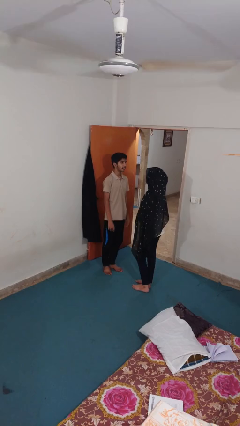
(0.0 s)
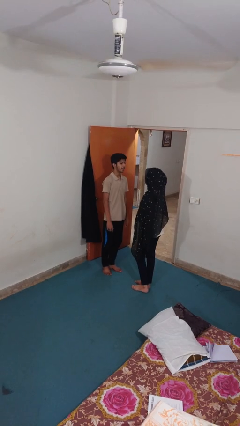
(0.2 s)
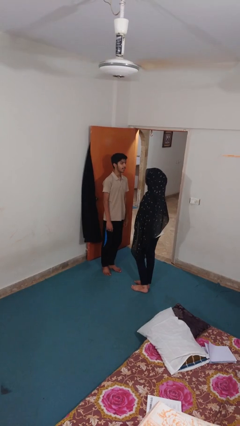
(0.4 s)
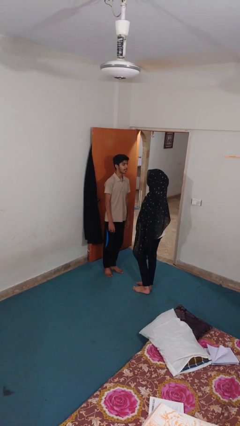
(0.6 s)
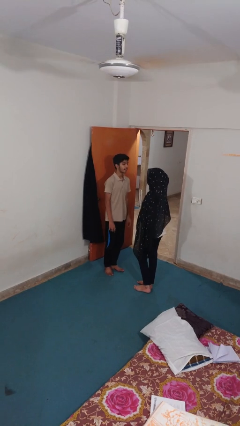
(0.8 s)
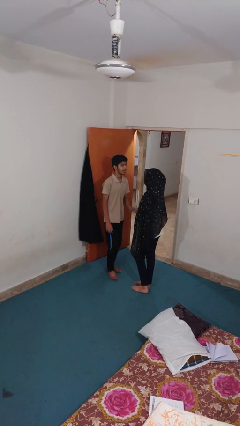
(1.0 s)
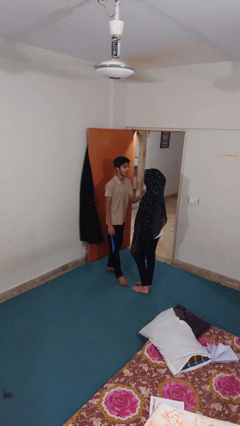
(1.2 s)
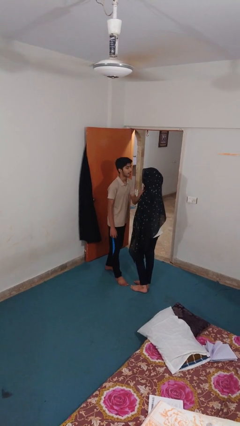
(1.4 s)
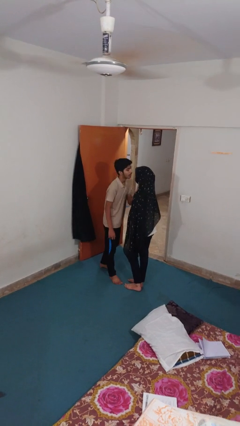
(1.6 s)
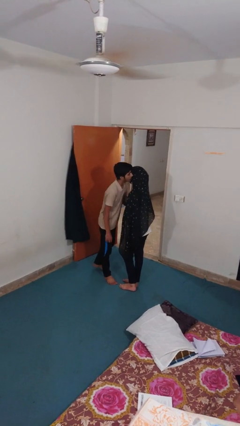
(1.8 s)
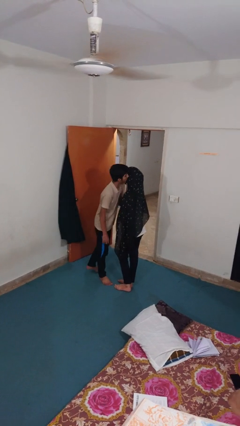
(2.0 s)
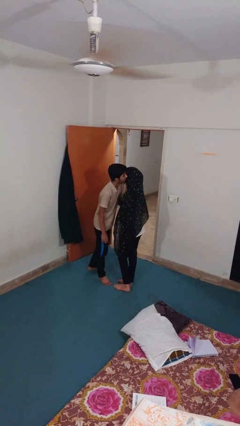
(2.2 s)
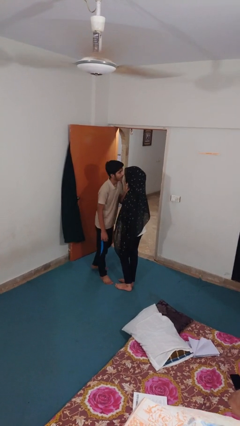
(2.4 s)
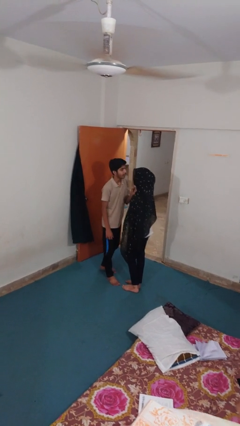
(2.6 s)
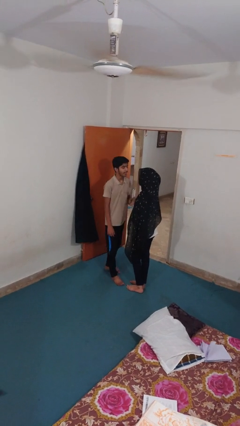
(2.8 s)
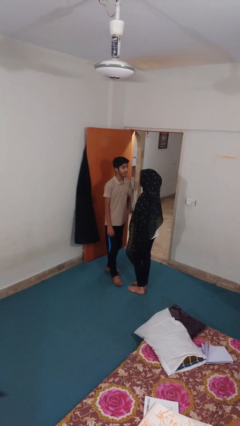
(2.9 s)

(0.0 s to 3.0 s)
person kisses cheek of person

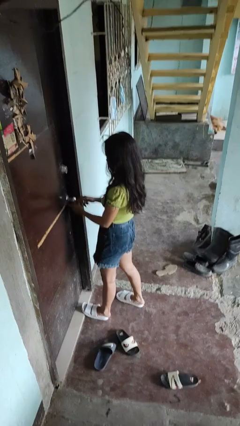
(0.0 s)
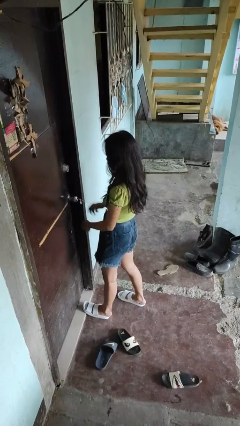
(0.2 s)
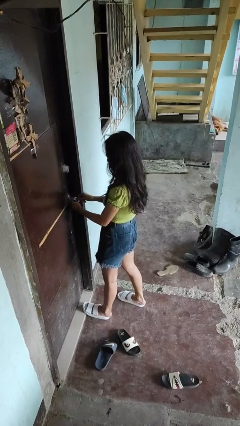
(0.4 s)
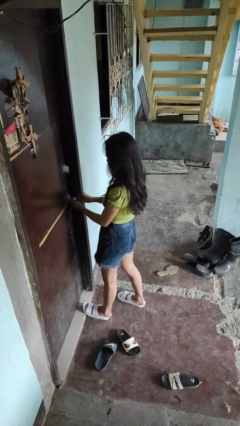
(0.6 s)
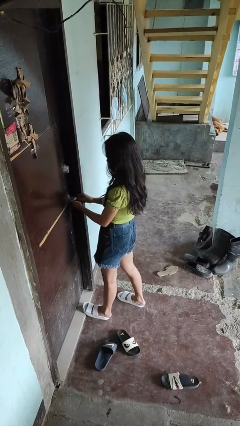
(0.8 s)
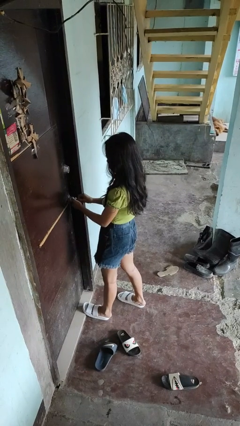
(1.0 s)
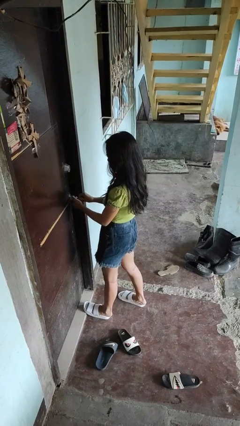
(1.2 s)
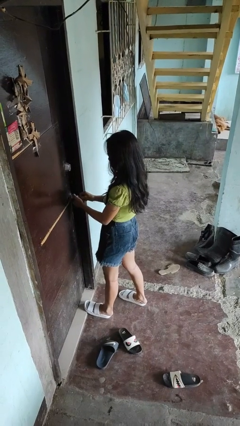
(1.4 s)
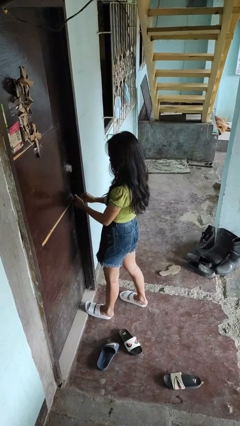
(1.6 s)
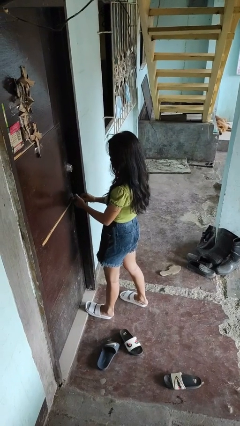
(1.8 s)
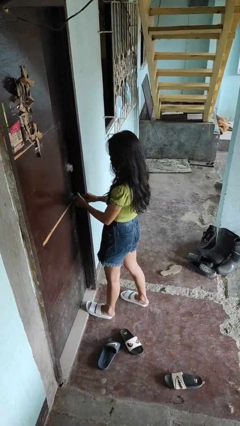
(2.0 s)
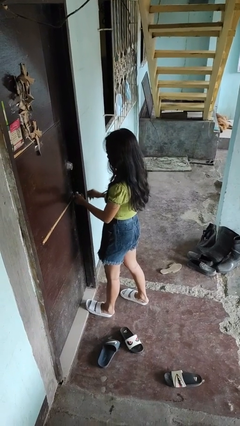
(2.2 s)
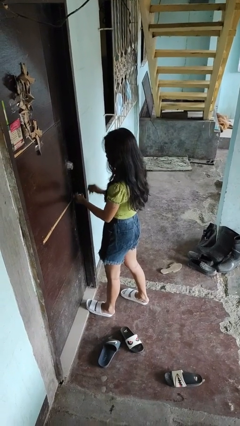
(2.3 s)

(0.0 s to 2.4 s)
person unlocks door with keys

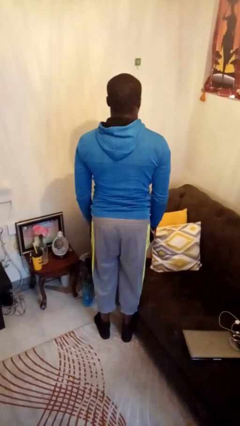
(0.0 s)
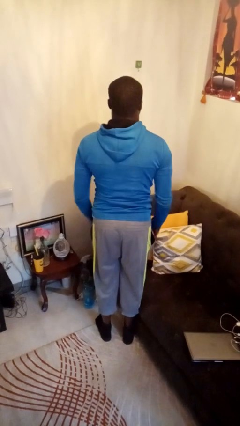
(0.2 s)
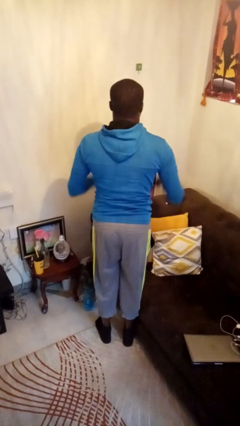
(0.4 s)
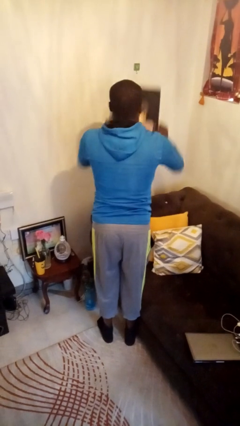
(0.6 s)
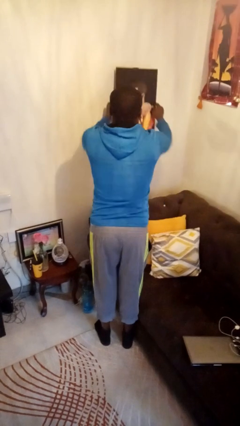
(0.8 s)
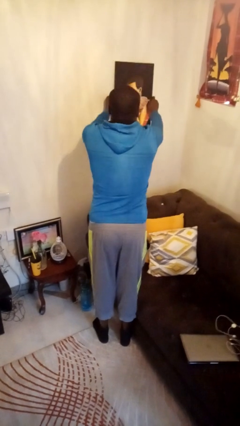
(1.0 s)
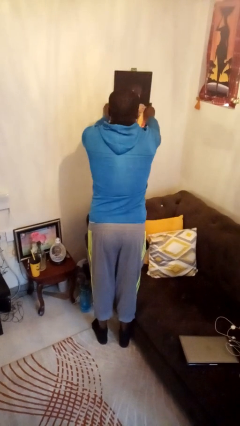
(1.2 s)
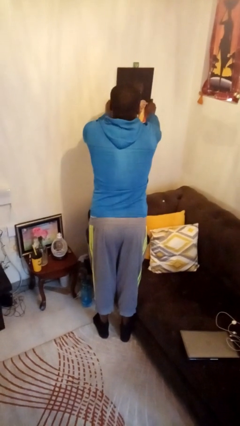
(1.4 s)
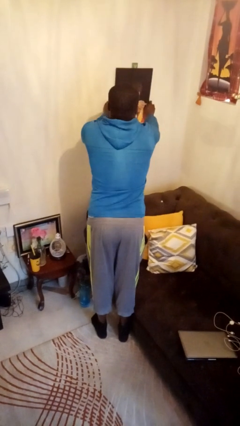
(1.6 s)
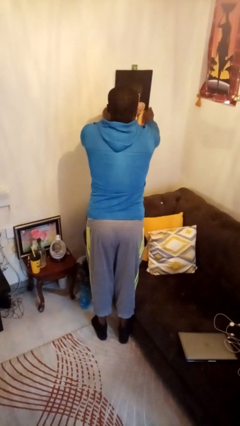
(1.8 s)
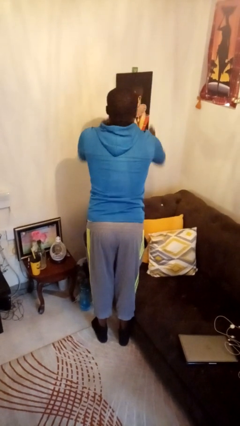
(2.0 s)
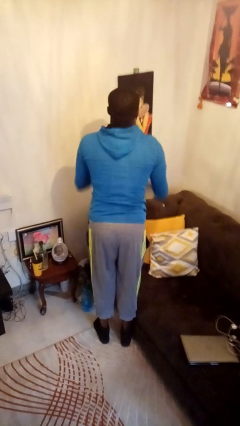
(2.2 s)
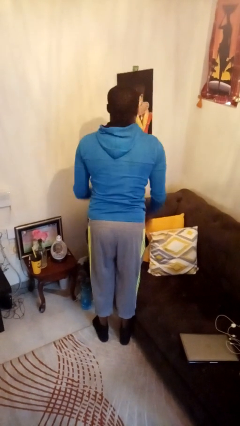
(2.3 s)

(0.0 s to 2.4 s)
person puts up picture frame

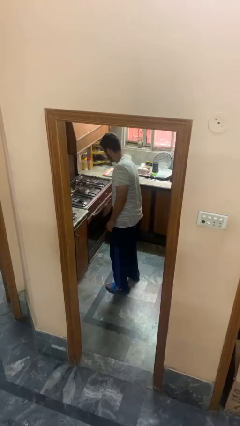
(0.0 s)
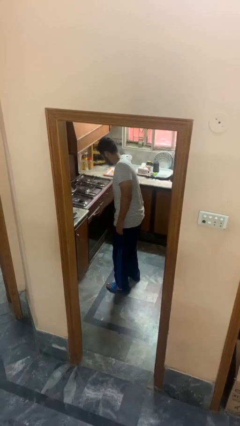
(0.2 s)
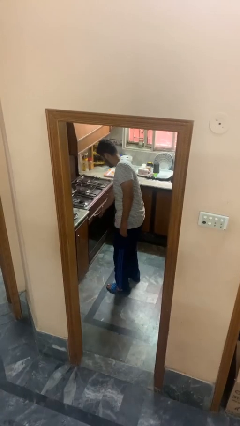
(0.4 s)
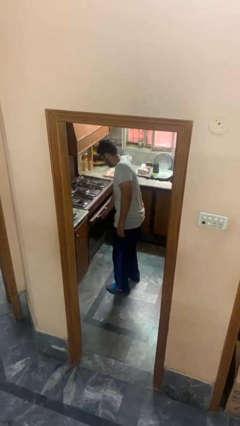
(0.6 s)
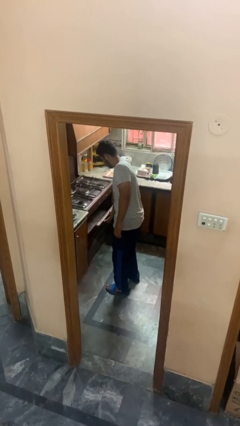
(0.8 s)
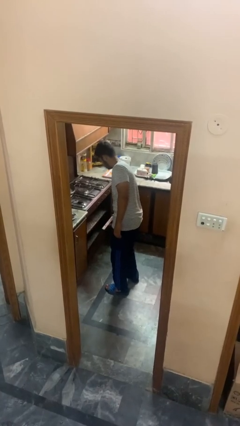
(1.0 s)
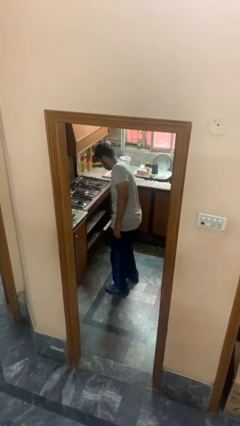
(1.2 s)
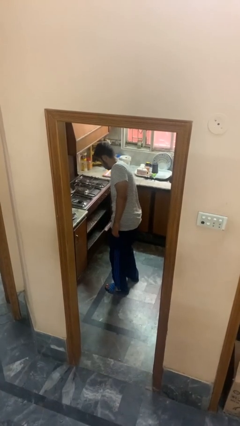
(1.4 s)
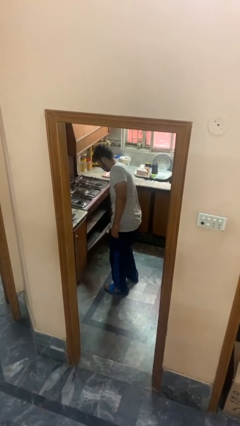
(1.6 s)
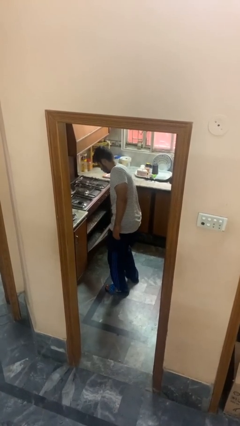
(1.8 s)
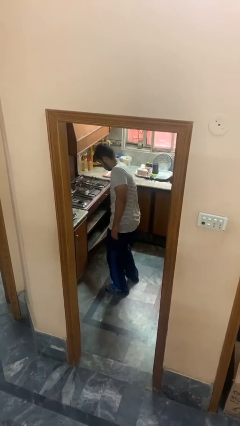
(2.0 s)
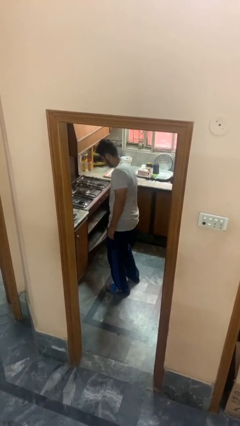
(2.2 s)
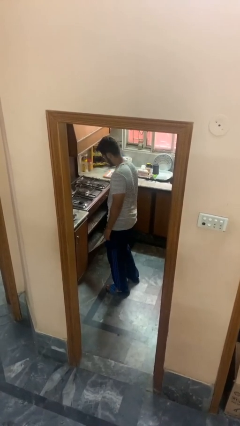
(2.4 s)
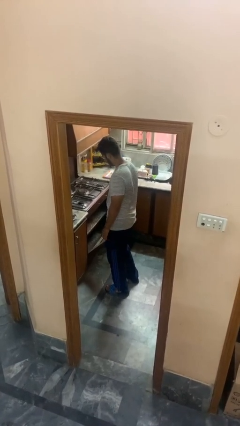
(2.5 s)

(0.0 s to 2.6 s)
person opens oven door

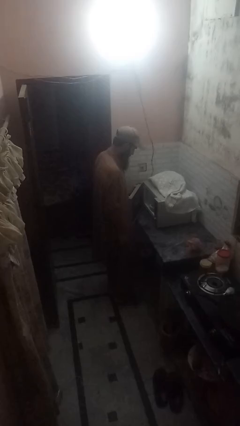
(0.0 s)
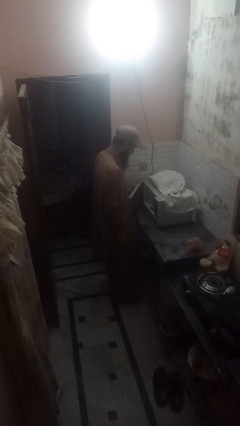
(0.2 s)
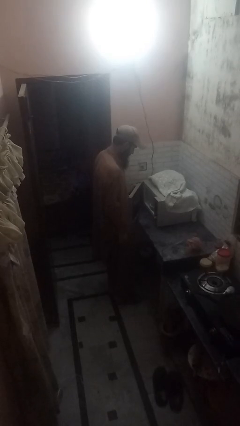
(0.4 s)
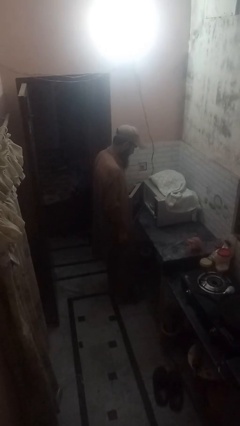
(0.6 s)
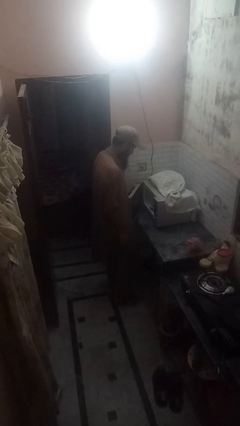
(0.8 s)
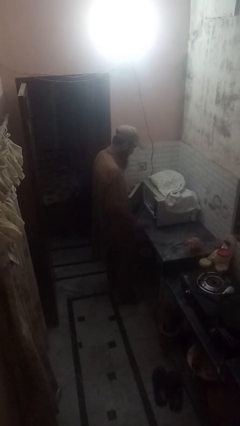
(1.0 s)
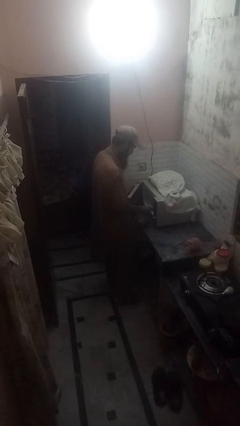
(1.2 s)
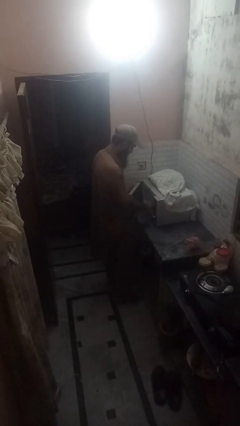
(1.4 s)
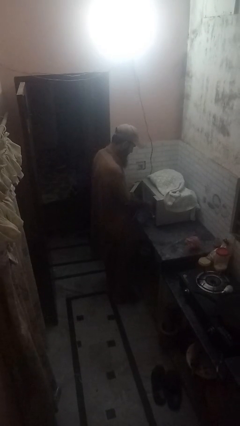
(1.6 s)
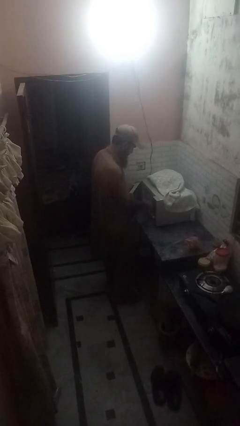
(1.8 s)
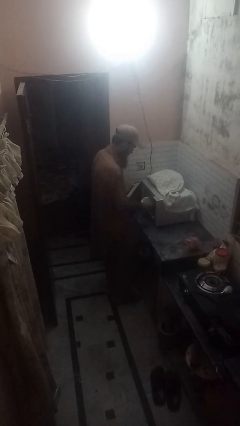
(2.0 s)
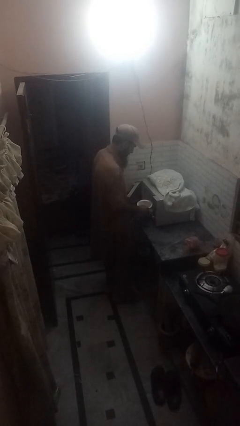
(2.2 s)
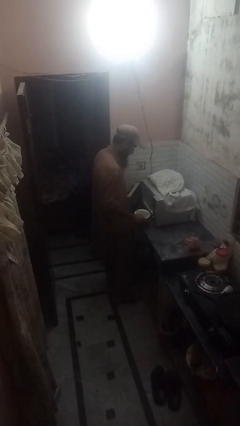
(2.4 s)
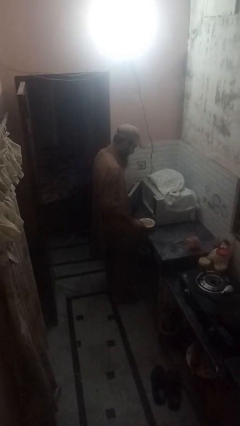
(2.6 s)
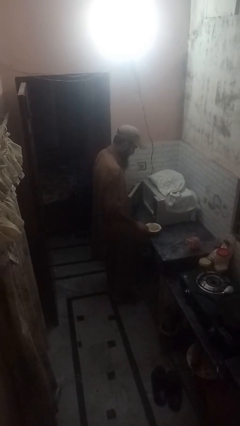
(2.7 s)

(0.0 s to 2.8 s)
person takes object from microwave

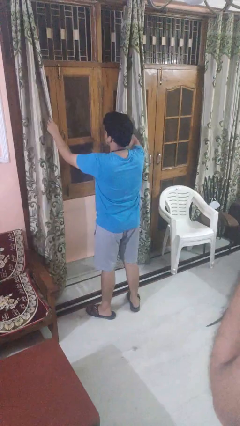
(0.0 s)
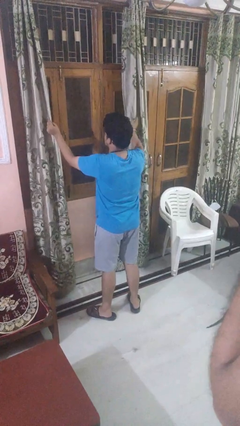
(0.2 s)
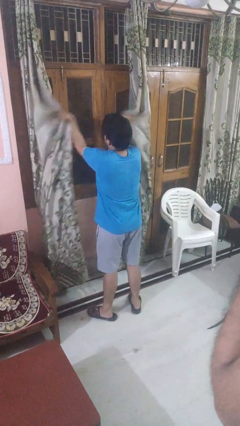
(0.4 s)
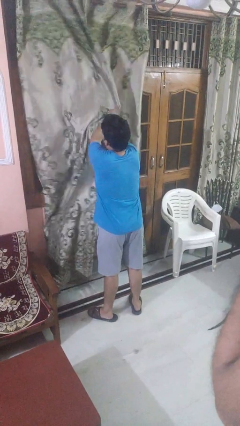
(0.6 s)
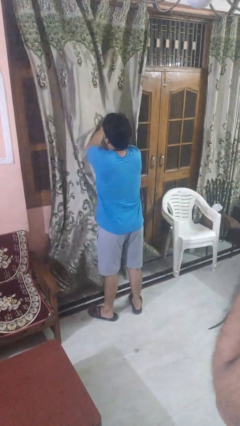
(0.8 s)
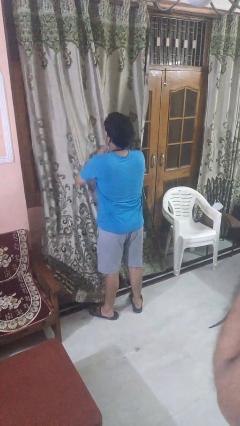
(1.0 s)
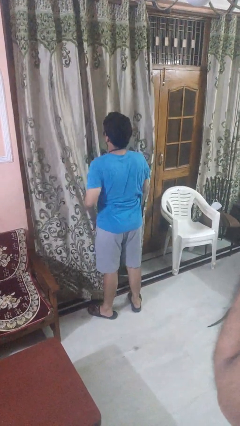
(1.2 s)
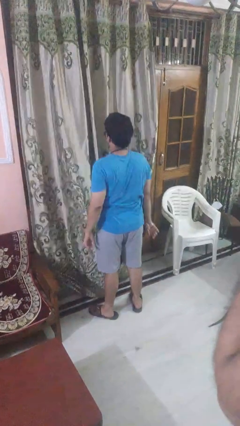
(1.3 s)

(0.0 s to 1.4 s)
person closes curtains

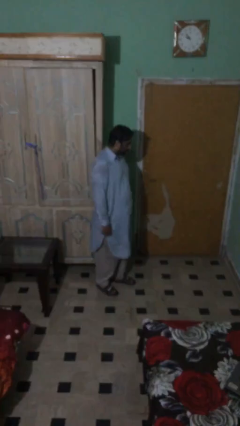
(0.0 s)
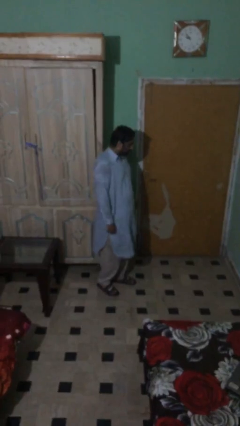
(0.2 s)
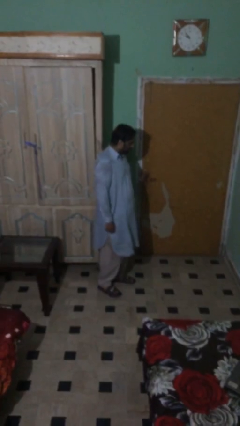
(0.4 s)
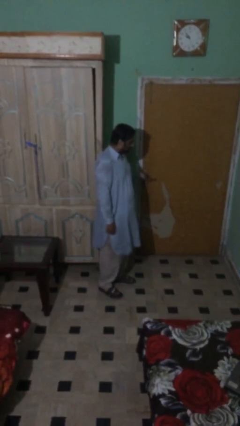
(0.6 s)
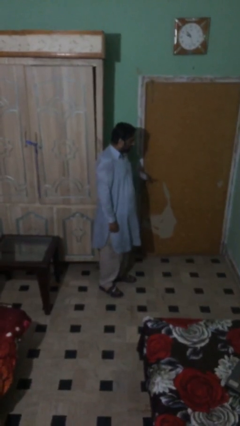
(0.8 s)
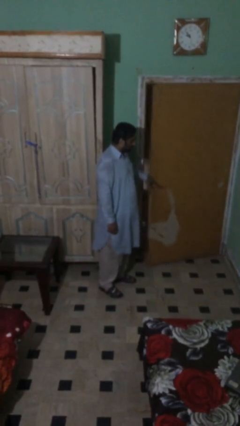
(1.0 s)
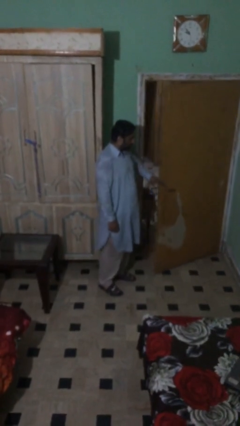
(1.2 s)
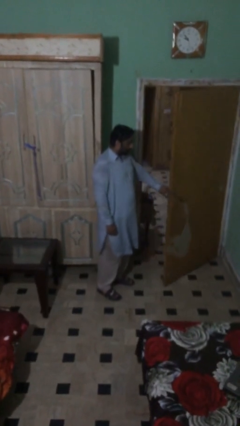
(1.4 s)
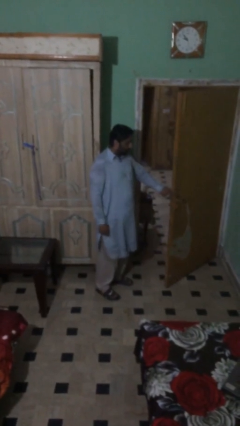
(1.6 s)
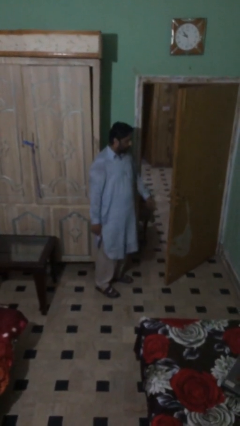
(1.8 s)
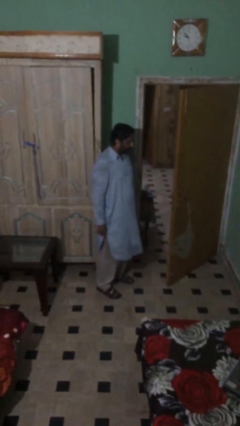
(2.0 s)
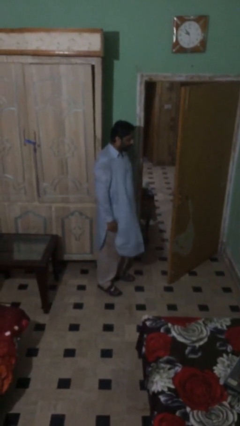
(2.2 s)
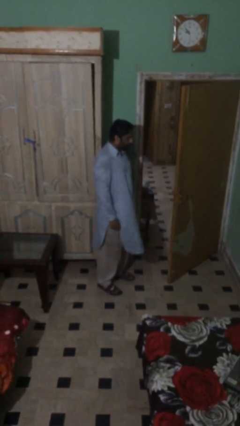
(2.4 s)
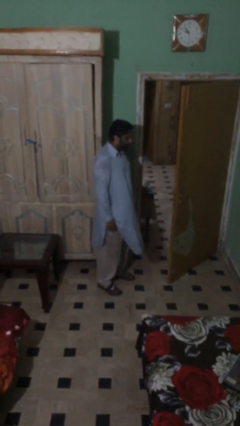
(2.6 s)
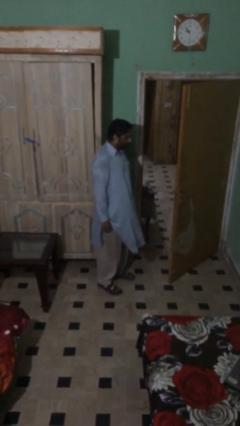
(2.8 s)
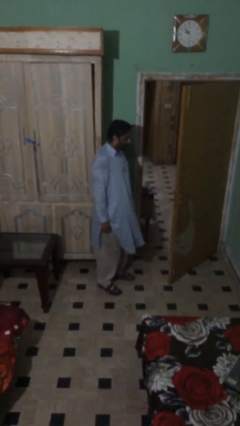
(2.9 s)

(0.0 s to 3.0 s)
person opens facility door
